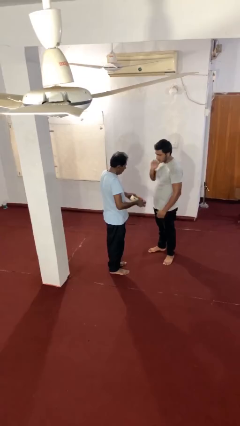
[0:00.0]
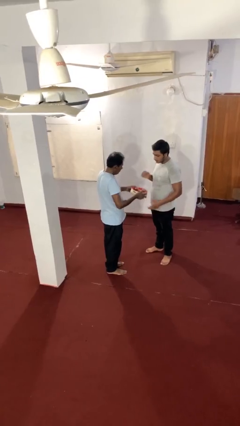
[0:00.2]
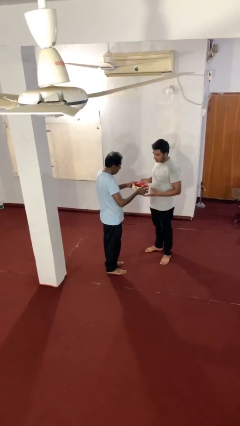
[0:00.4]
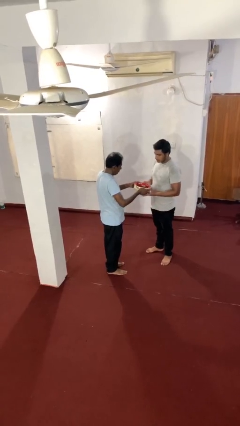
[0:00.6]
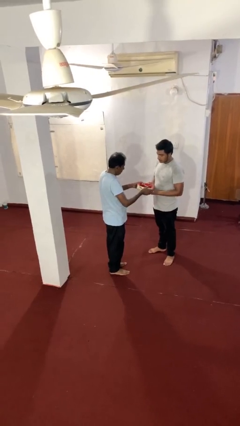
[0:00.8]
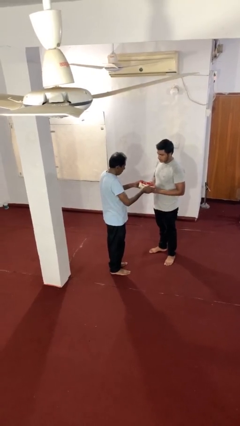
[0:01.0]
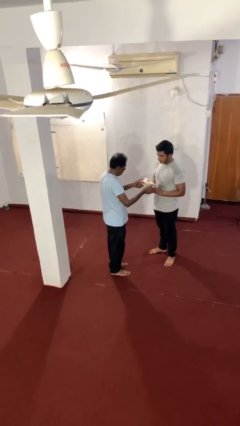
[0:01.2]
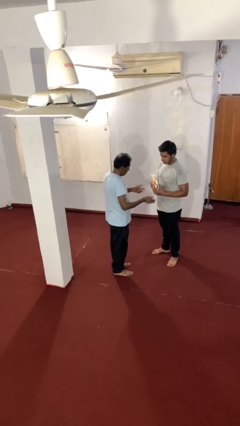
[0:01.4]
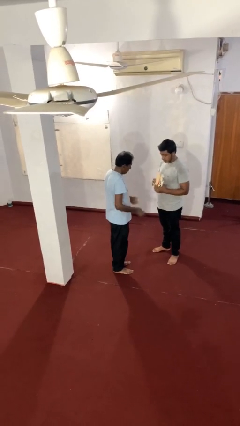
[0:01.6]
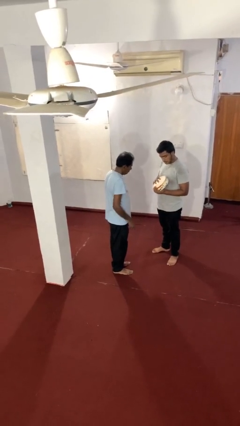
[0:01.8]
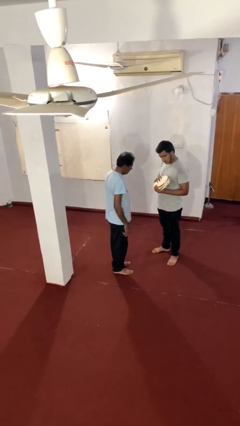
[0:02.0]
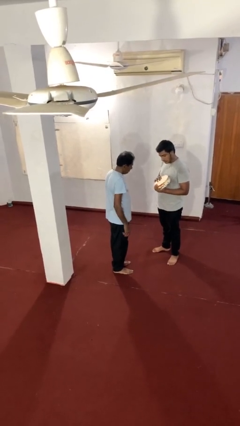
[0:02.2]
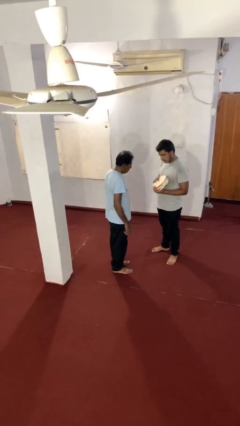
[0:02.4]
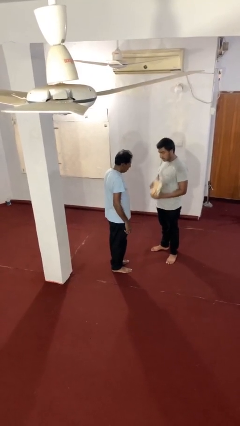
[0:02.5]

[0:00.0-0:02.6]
person transfers object to person

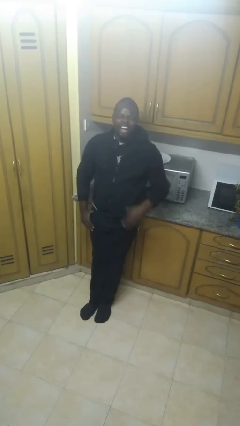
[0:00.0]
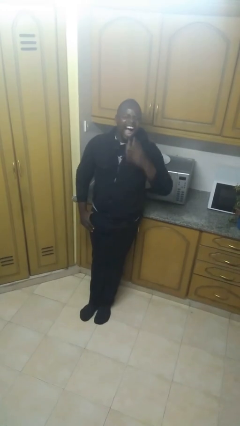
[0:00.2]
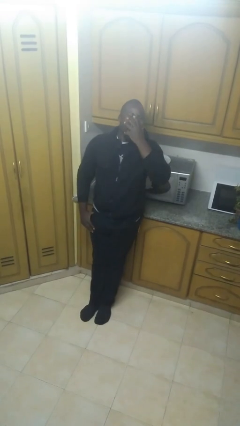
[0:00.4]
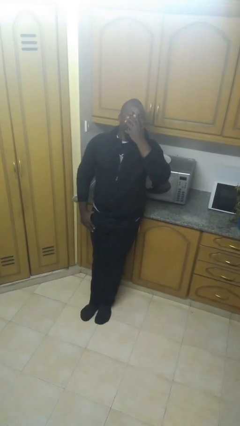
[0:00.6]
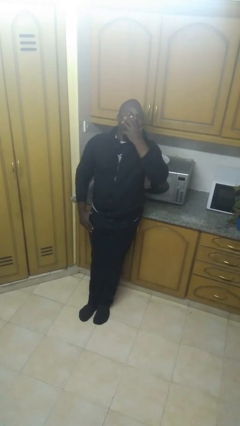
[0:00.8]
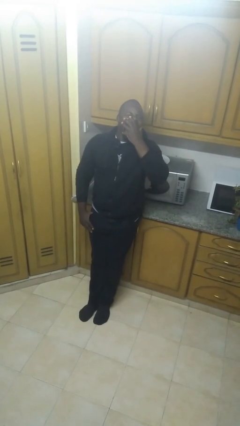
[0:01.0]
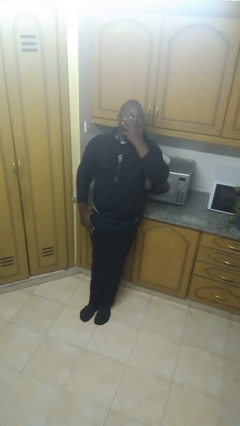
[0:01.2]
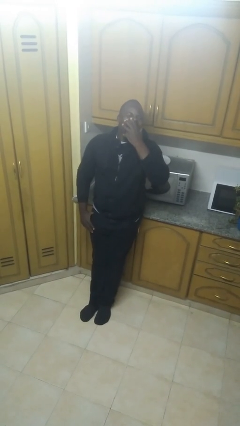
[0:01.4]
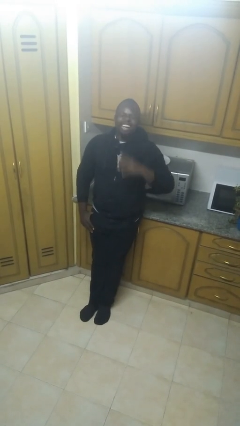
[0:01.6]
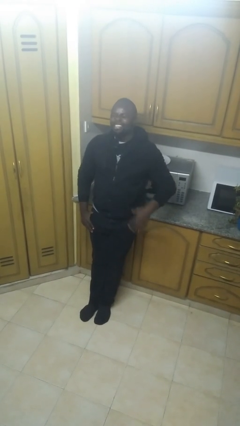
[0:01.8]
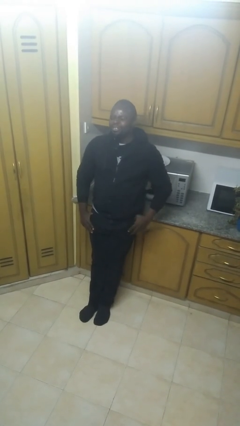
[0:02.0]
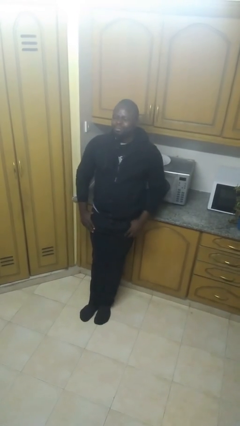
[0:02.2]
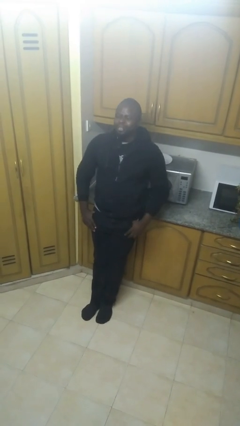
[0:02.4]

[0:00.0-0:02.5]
person yawns

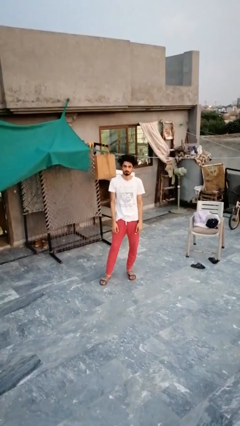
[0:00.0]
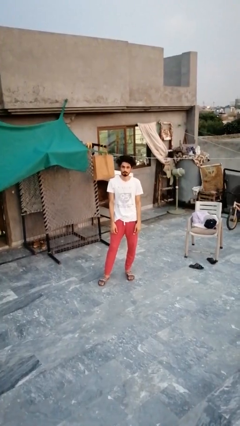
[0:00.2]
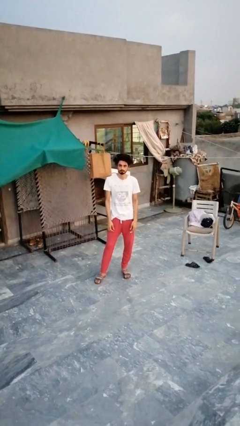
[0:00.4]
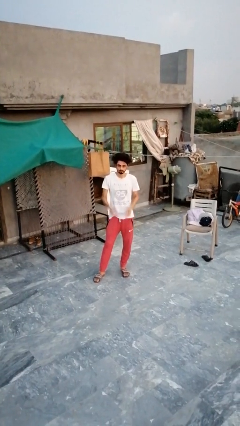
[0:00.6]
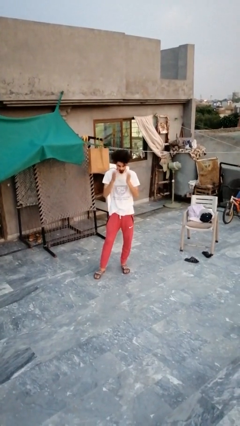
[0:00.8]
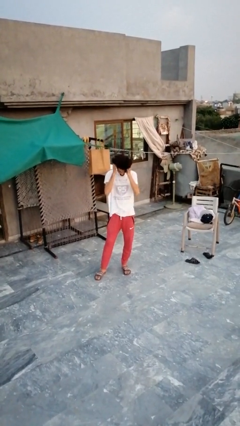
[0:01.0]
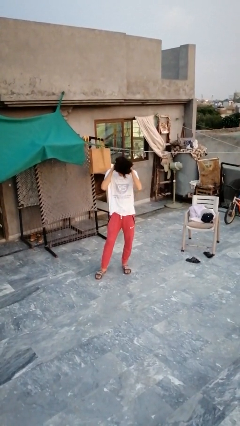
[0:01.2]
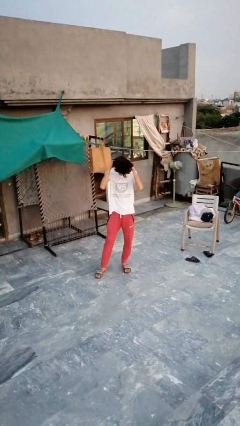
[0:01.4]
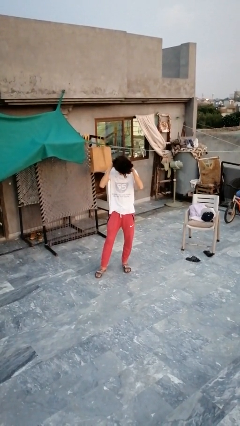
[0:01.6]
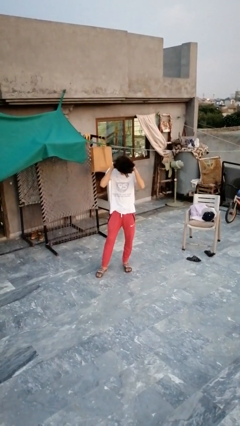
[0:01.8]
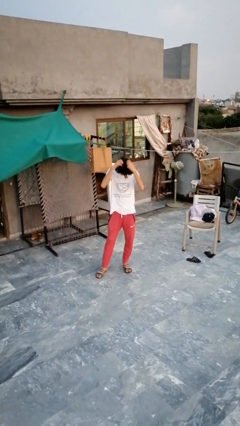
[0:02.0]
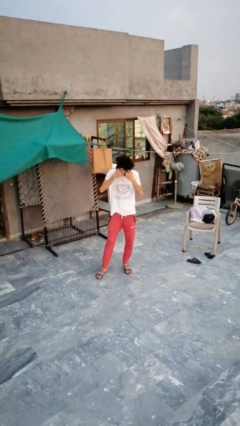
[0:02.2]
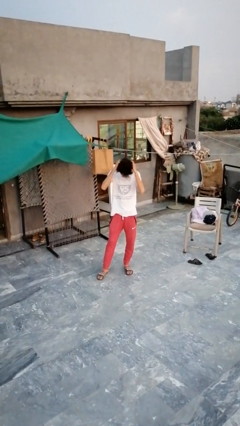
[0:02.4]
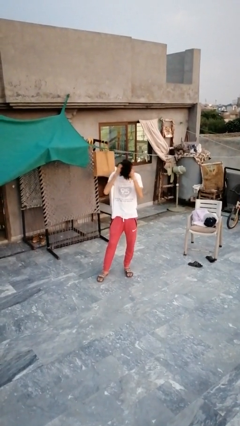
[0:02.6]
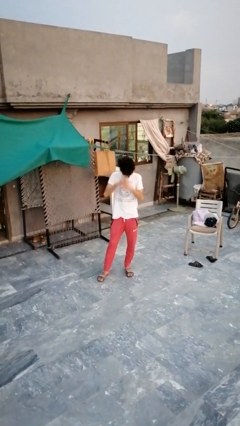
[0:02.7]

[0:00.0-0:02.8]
person strokes hair

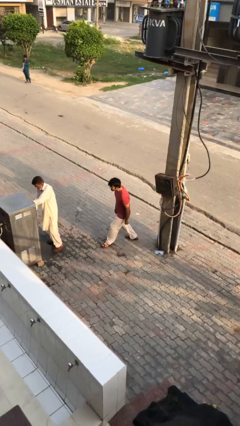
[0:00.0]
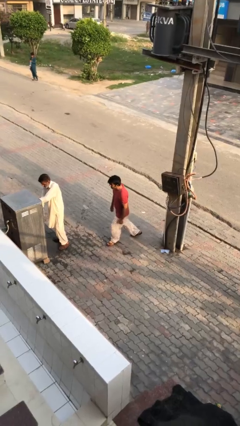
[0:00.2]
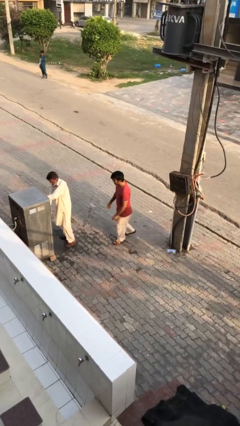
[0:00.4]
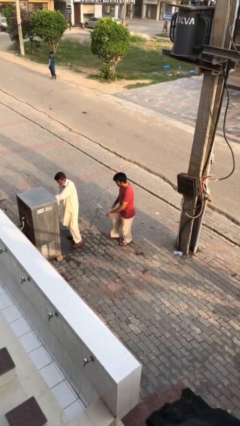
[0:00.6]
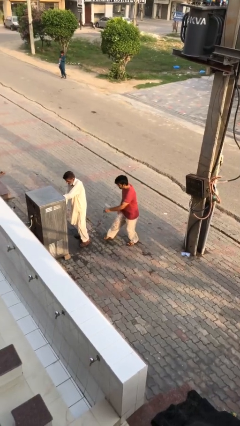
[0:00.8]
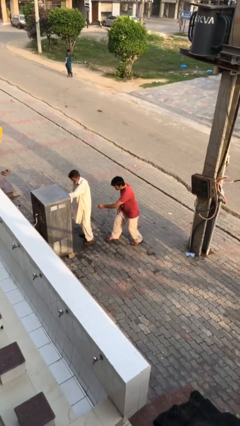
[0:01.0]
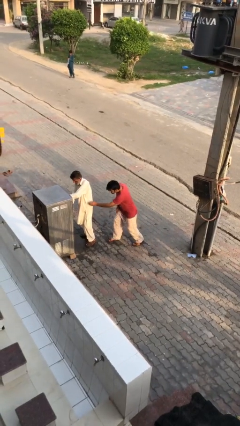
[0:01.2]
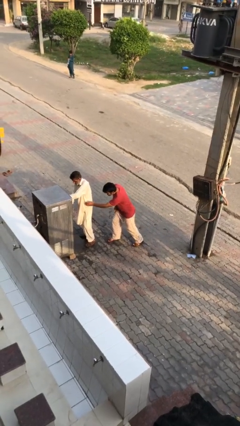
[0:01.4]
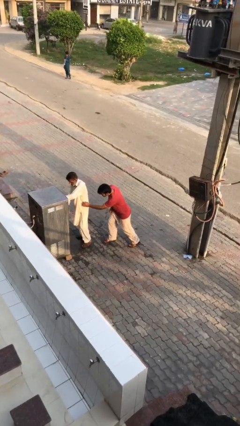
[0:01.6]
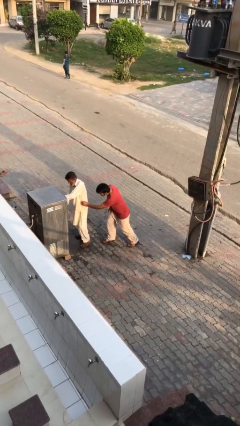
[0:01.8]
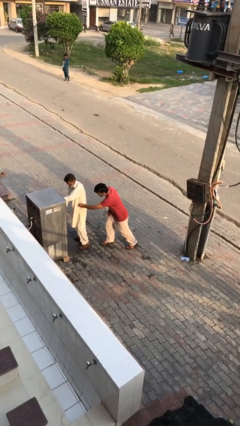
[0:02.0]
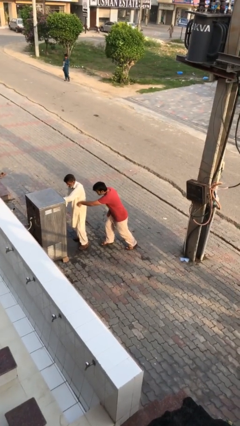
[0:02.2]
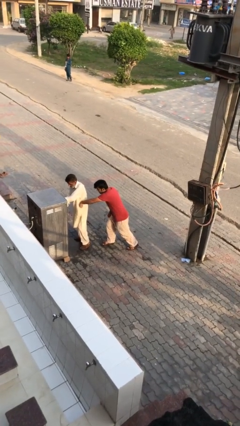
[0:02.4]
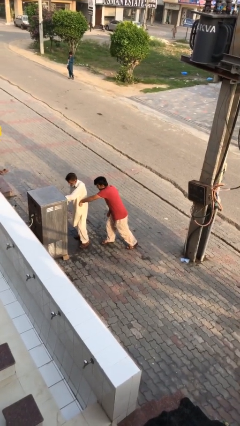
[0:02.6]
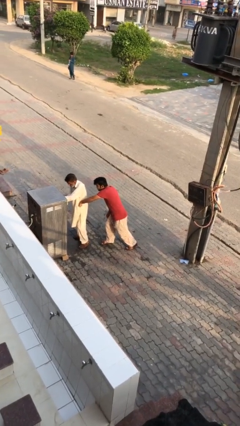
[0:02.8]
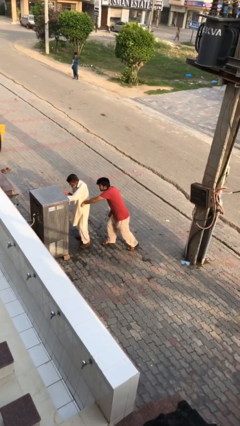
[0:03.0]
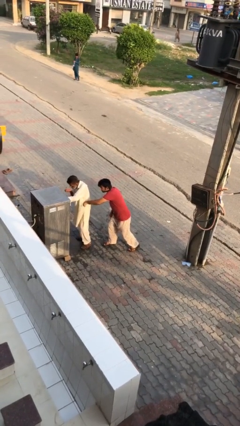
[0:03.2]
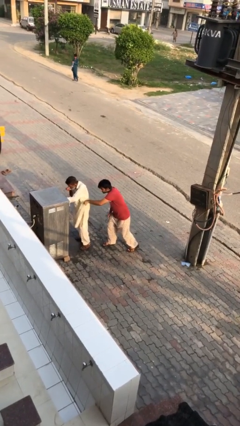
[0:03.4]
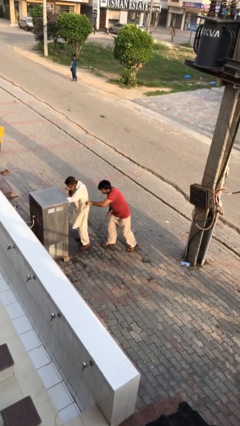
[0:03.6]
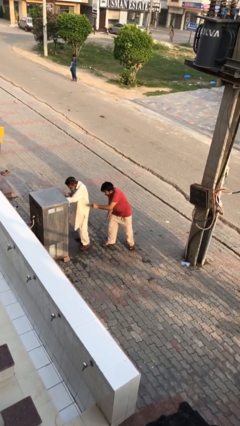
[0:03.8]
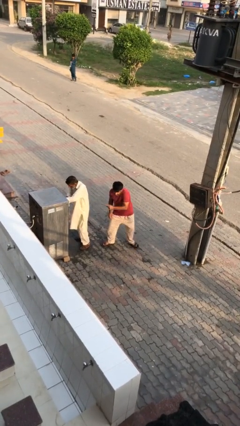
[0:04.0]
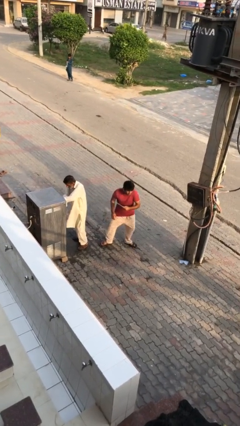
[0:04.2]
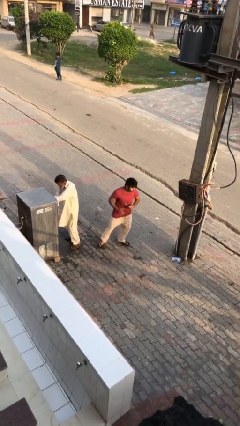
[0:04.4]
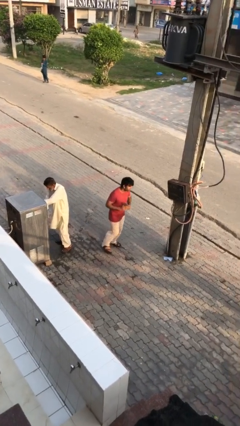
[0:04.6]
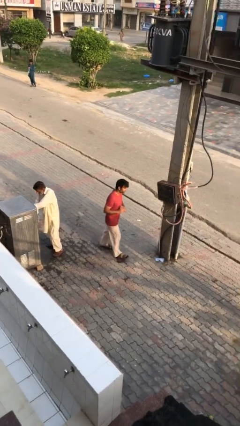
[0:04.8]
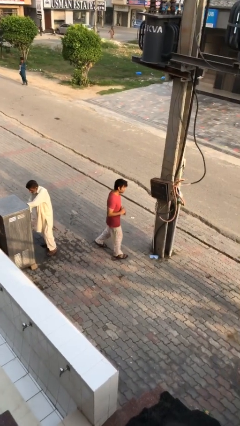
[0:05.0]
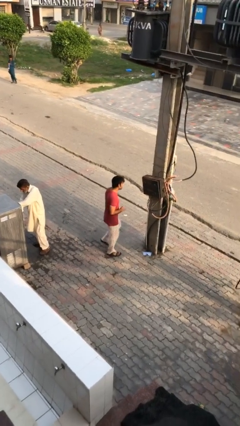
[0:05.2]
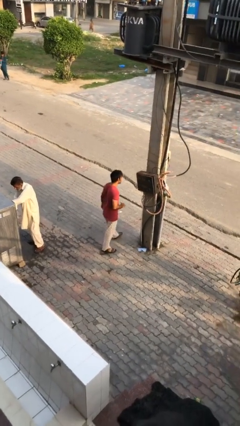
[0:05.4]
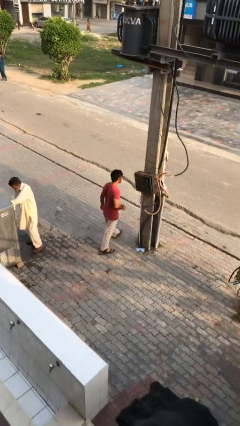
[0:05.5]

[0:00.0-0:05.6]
person steals object from person

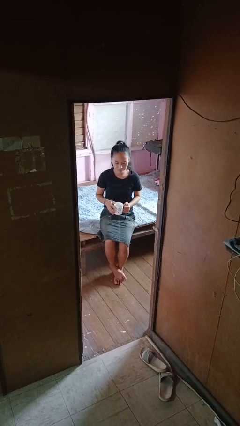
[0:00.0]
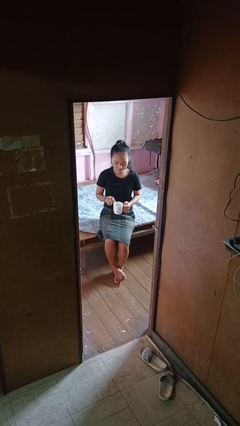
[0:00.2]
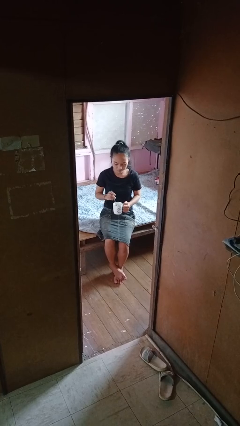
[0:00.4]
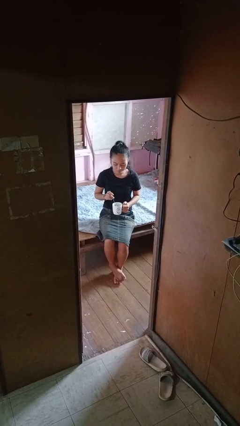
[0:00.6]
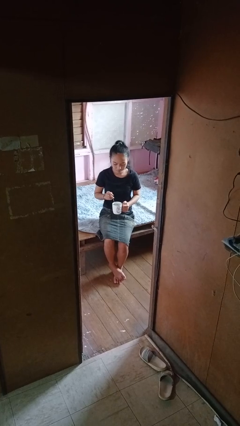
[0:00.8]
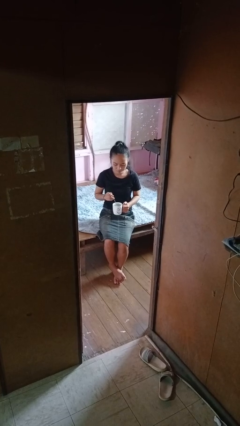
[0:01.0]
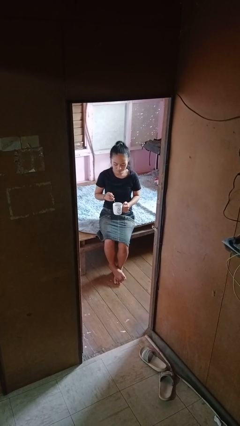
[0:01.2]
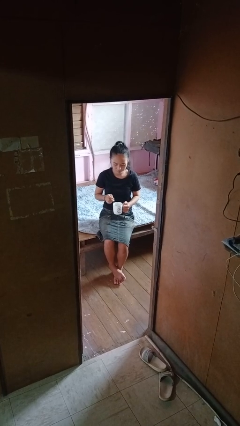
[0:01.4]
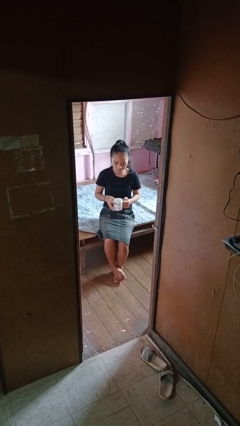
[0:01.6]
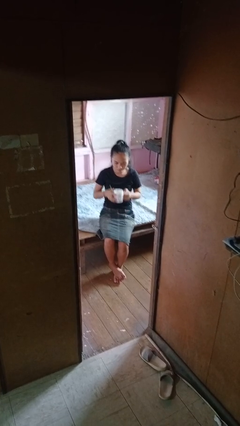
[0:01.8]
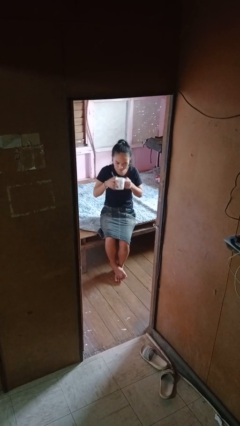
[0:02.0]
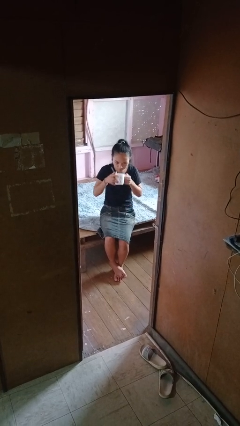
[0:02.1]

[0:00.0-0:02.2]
person stirs mug

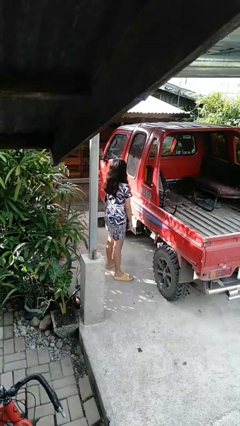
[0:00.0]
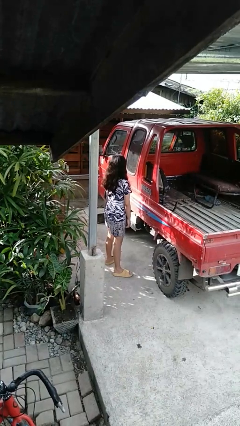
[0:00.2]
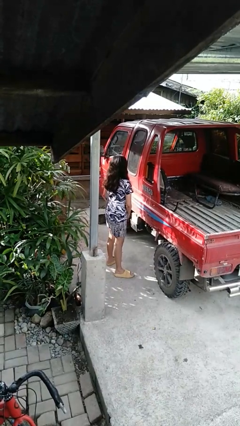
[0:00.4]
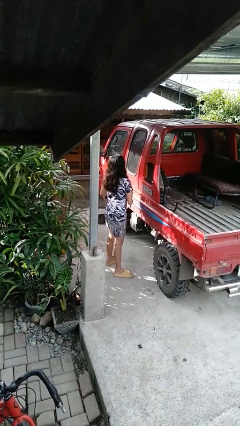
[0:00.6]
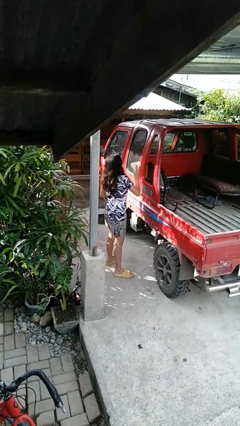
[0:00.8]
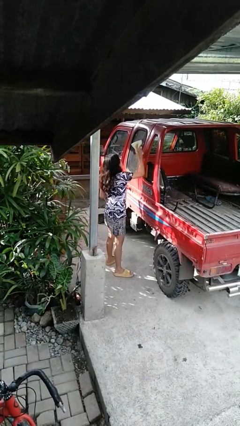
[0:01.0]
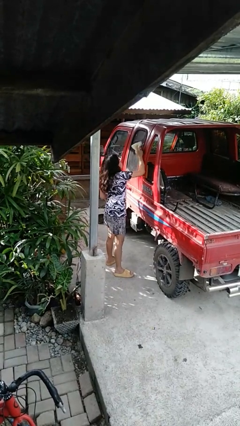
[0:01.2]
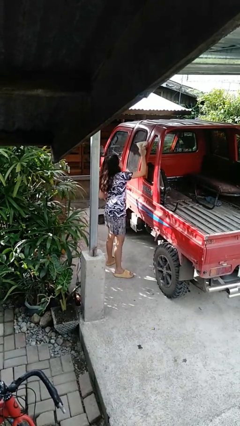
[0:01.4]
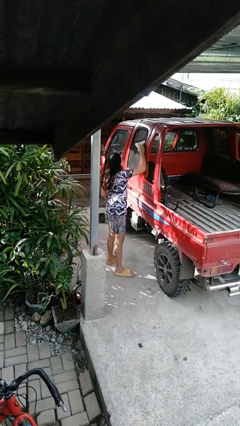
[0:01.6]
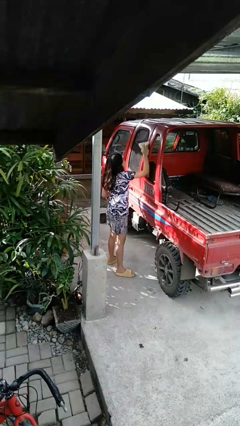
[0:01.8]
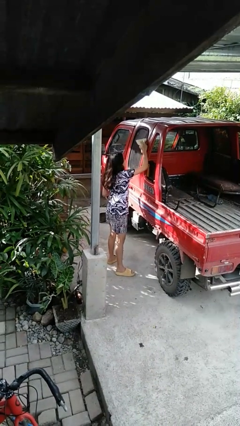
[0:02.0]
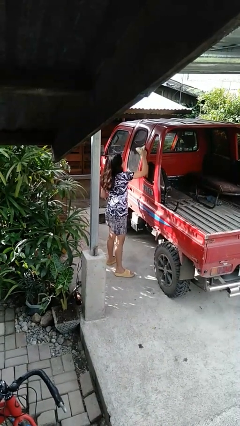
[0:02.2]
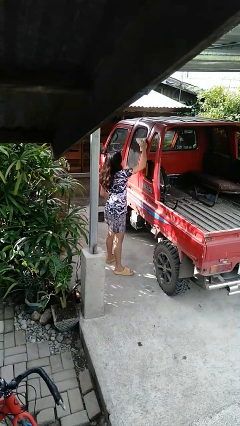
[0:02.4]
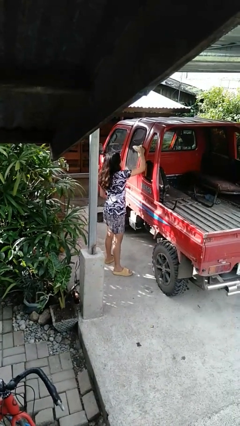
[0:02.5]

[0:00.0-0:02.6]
person polishes car with rag
